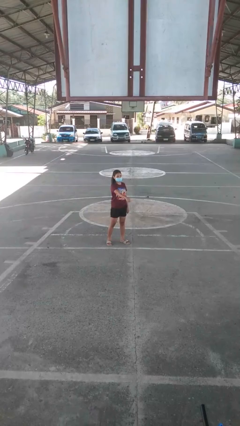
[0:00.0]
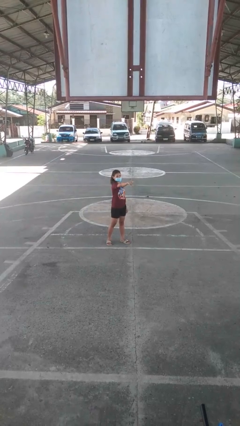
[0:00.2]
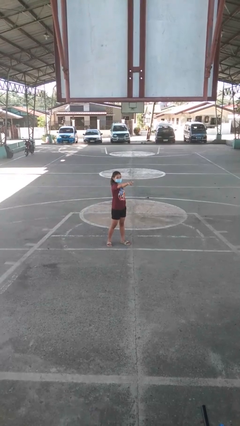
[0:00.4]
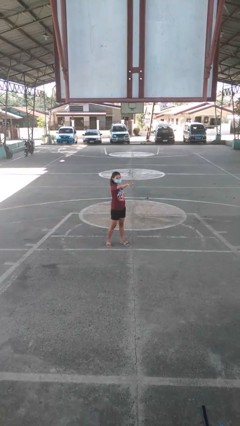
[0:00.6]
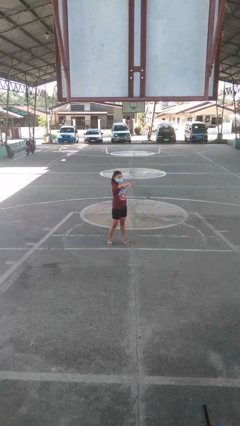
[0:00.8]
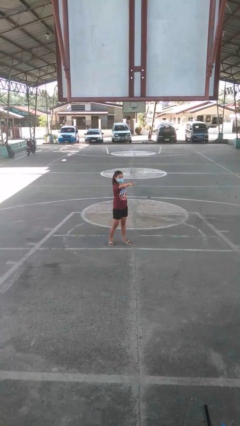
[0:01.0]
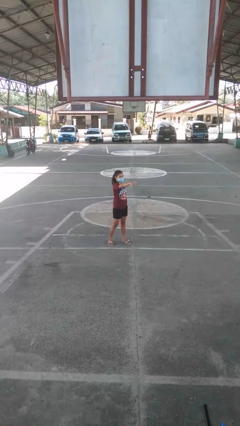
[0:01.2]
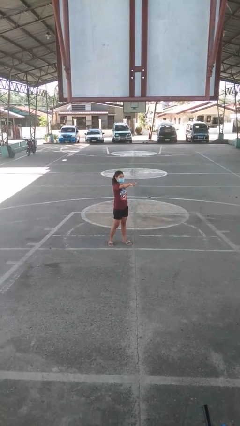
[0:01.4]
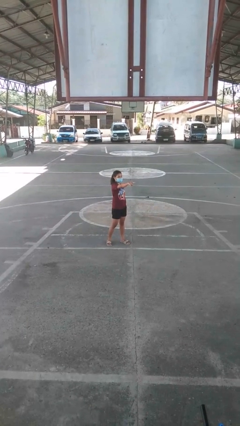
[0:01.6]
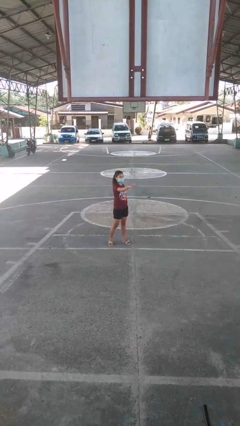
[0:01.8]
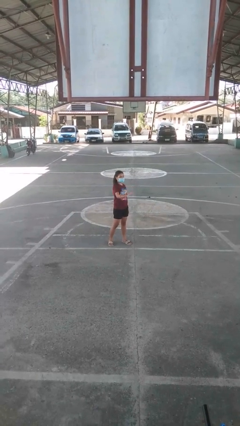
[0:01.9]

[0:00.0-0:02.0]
person points at person

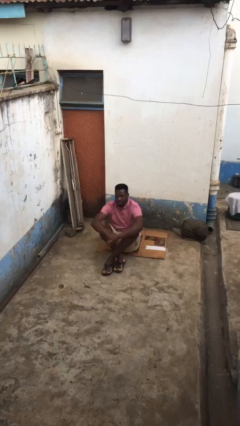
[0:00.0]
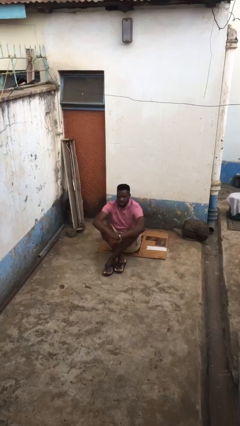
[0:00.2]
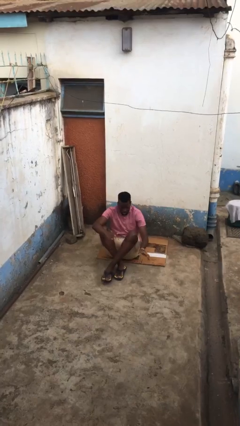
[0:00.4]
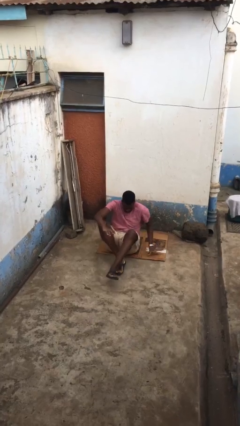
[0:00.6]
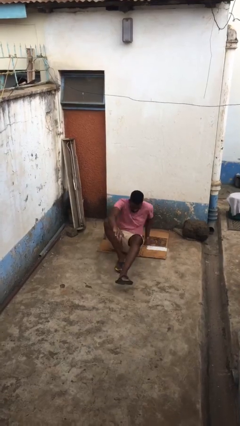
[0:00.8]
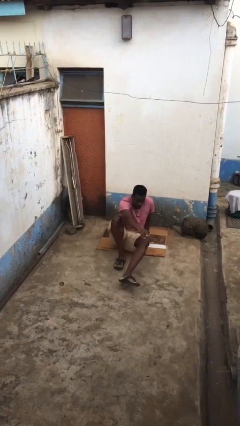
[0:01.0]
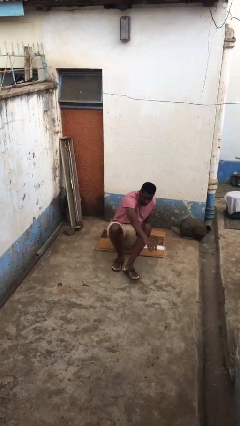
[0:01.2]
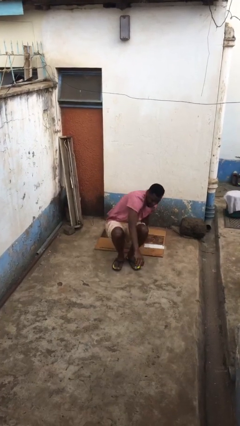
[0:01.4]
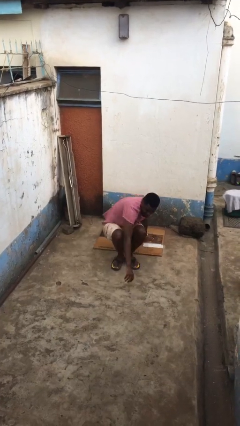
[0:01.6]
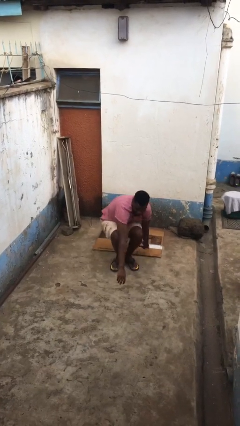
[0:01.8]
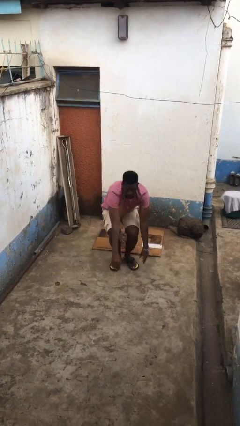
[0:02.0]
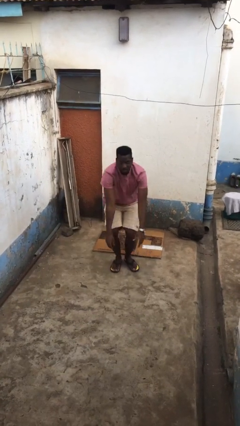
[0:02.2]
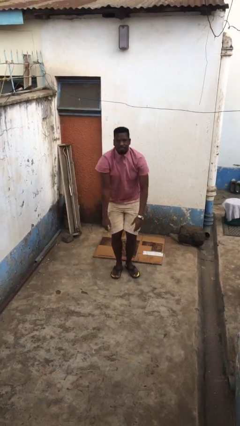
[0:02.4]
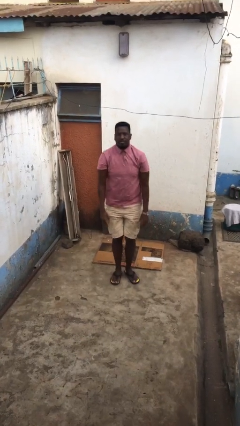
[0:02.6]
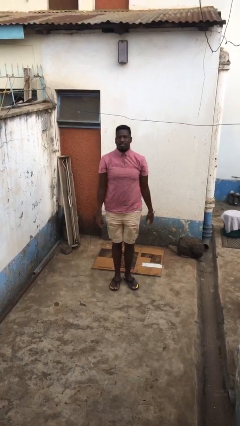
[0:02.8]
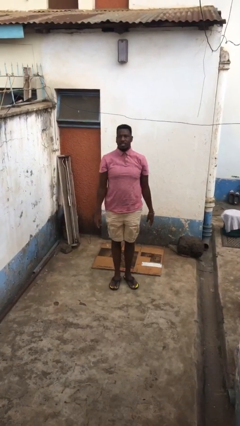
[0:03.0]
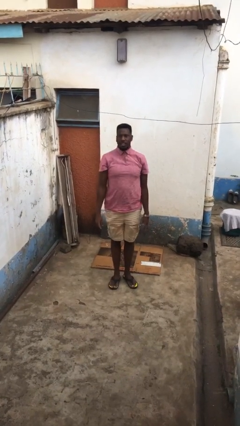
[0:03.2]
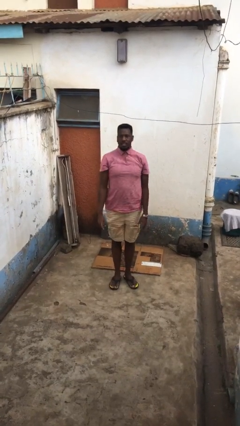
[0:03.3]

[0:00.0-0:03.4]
person stands up from floor

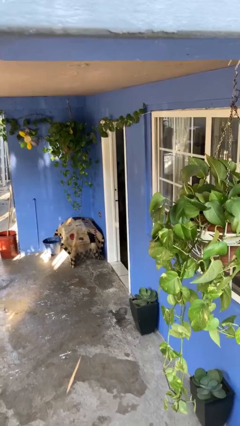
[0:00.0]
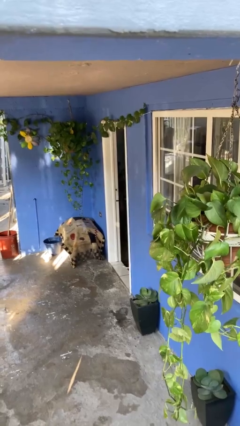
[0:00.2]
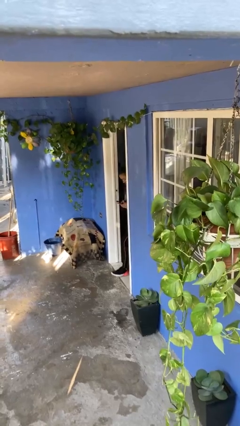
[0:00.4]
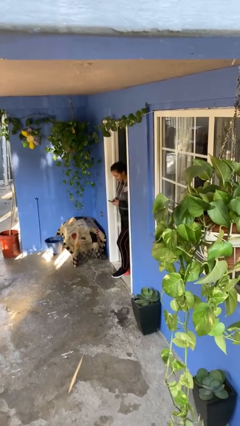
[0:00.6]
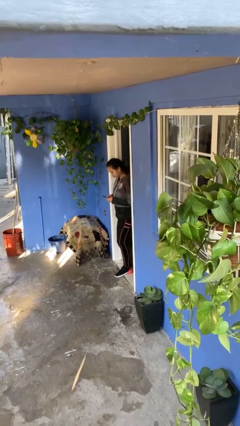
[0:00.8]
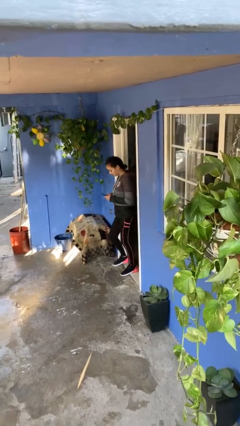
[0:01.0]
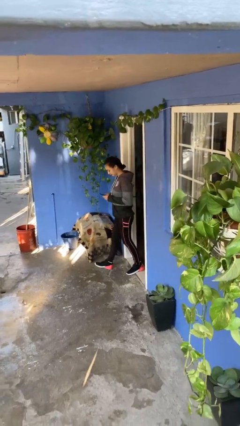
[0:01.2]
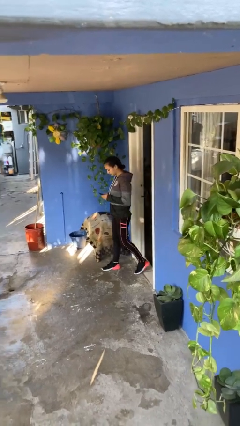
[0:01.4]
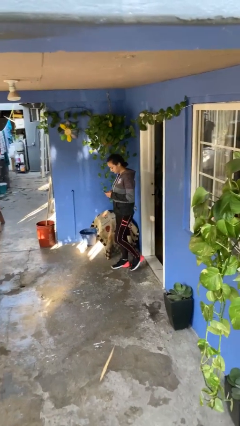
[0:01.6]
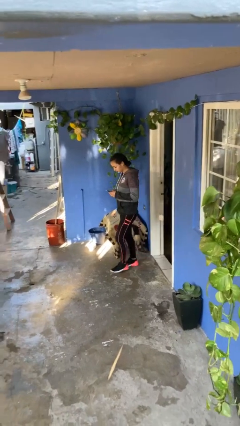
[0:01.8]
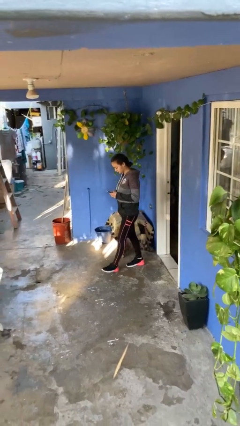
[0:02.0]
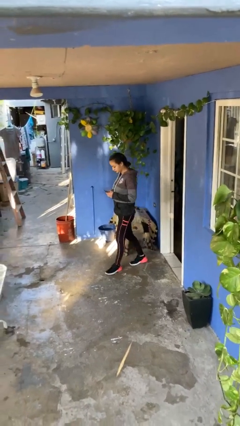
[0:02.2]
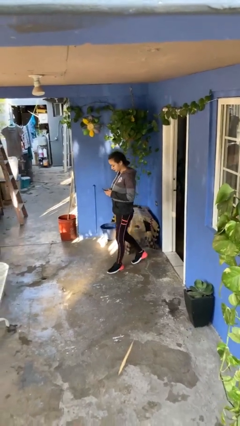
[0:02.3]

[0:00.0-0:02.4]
person enters scene through structure

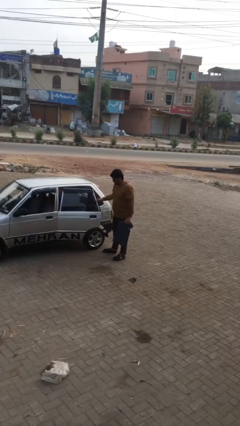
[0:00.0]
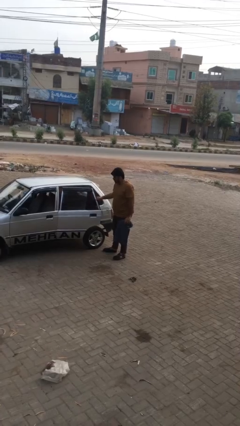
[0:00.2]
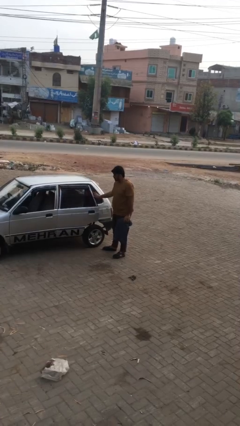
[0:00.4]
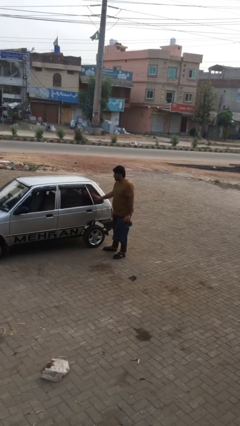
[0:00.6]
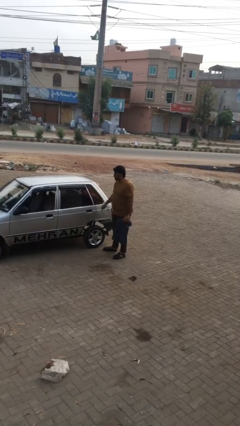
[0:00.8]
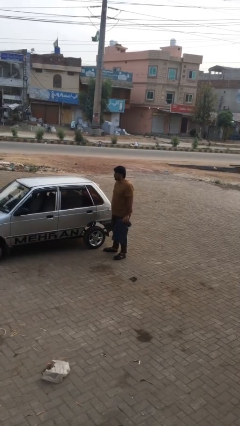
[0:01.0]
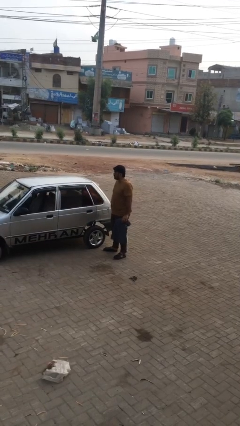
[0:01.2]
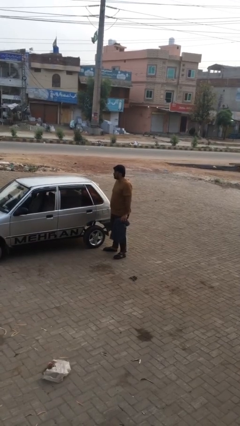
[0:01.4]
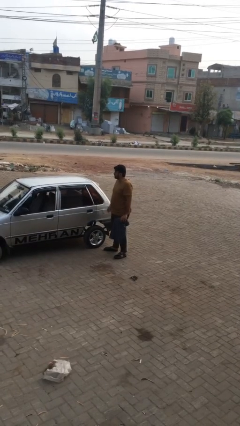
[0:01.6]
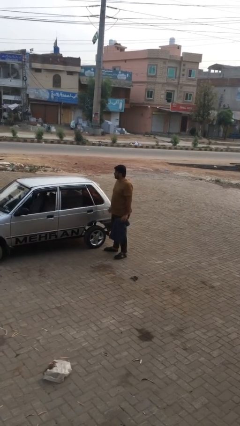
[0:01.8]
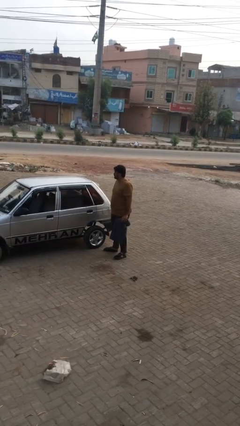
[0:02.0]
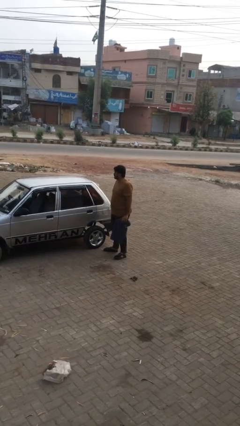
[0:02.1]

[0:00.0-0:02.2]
person closes car door

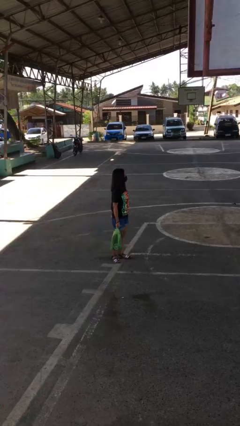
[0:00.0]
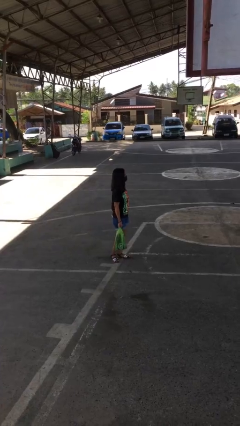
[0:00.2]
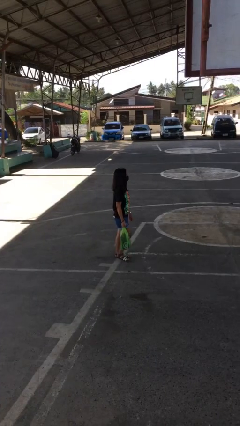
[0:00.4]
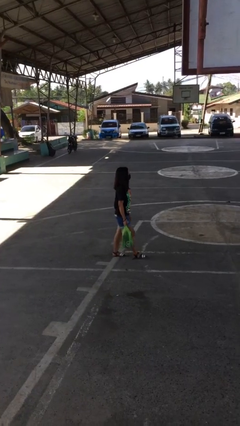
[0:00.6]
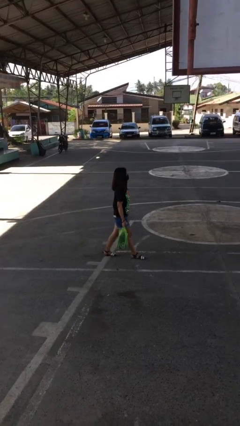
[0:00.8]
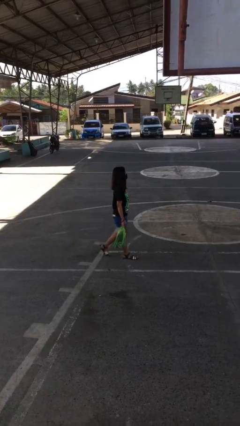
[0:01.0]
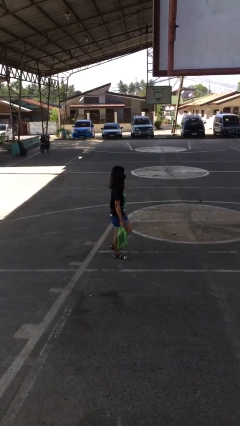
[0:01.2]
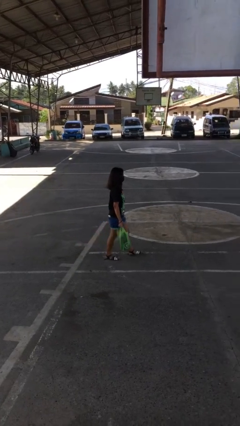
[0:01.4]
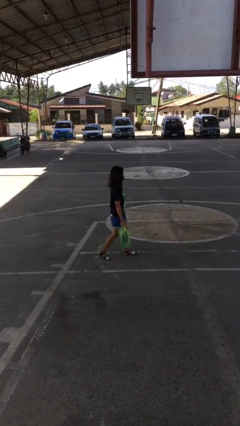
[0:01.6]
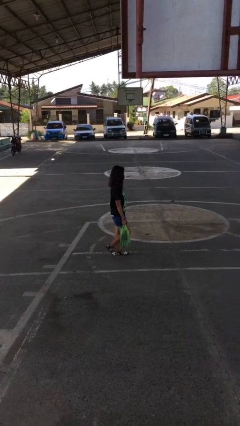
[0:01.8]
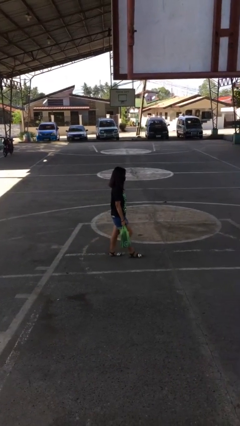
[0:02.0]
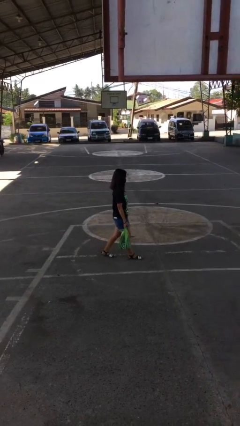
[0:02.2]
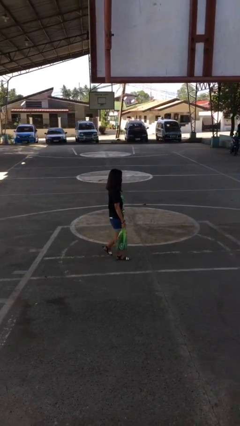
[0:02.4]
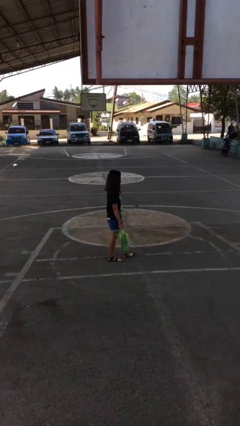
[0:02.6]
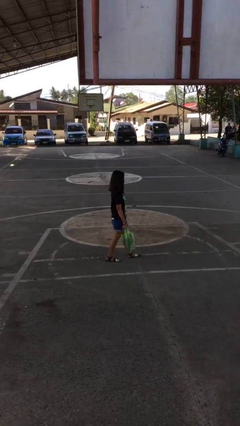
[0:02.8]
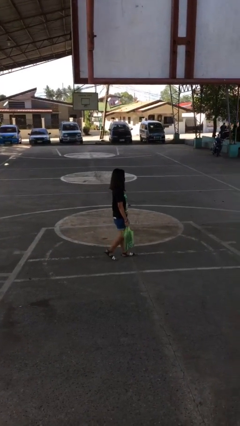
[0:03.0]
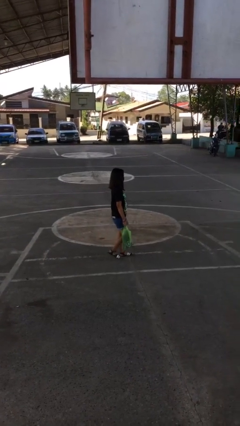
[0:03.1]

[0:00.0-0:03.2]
person carries groceries

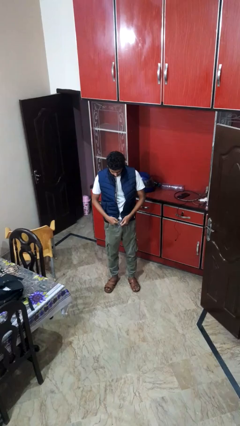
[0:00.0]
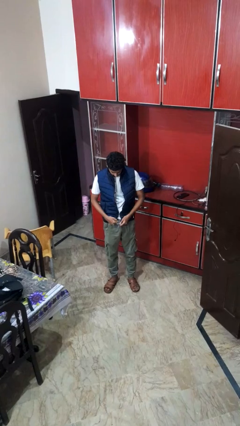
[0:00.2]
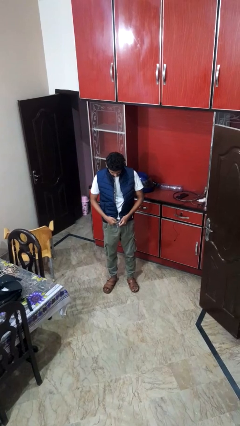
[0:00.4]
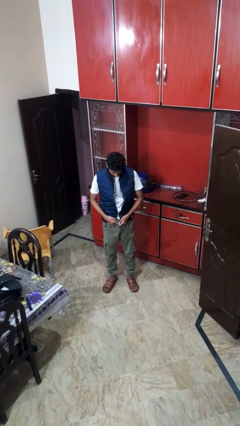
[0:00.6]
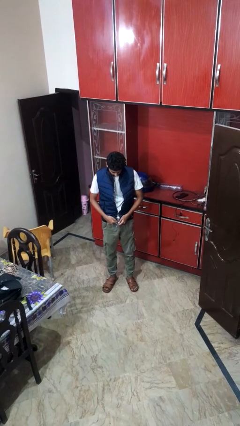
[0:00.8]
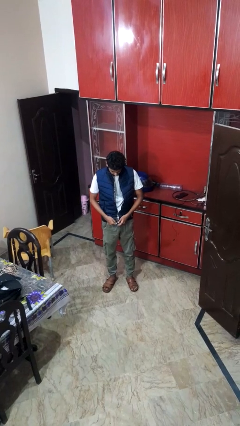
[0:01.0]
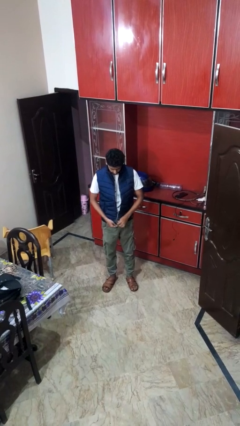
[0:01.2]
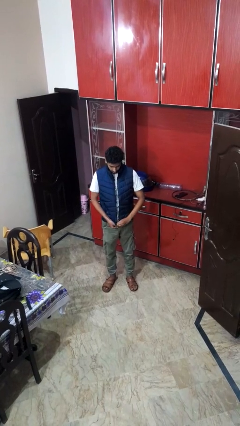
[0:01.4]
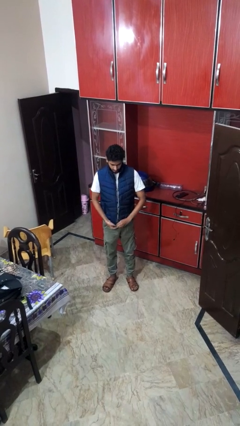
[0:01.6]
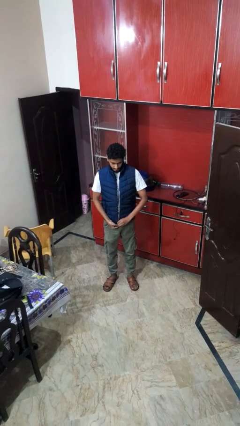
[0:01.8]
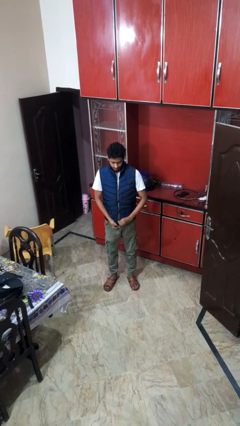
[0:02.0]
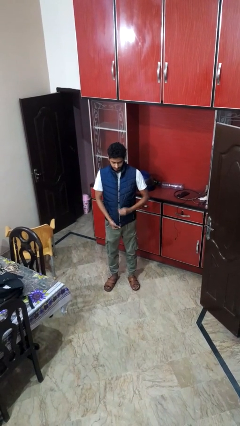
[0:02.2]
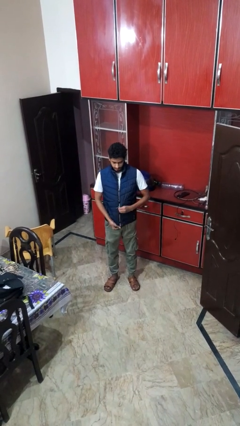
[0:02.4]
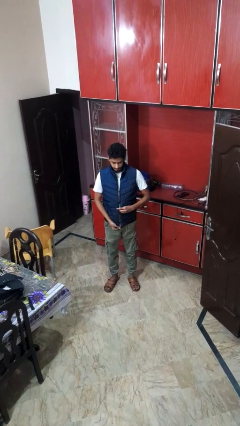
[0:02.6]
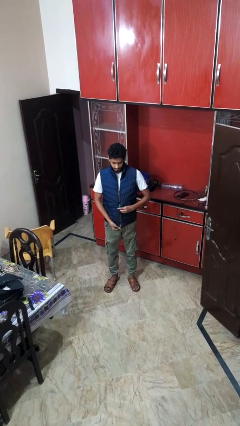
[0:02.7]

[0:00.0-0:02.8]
person zips up jacket

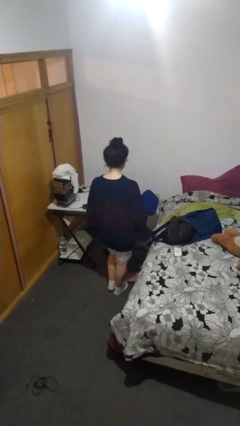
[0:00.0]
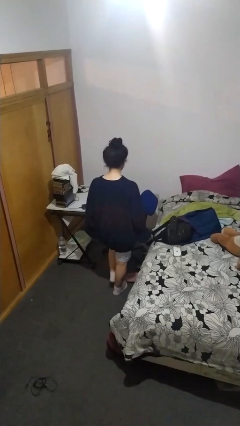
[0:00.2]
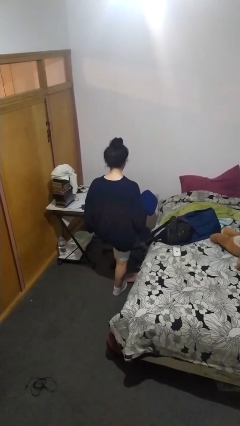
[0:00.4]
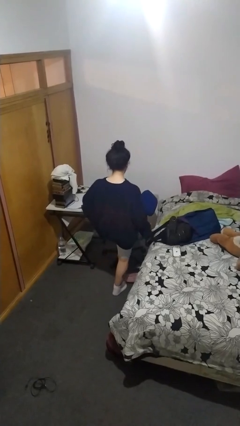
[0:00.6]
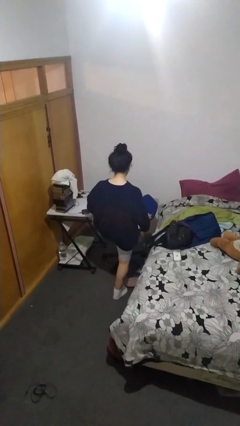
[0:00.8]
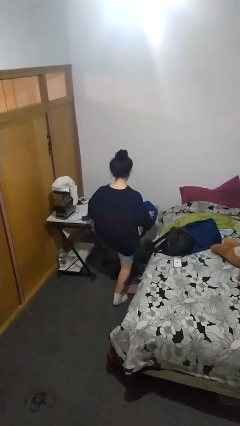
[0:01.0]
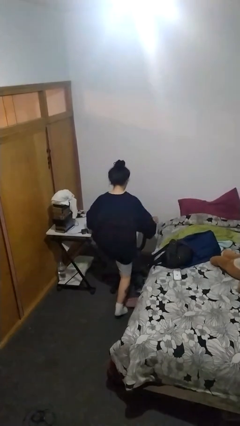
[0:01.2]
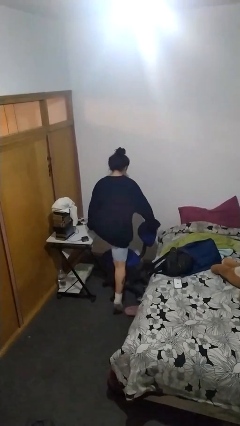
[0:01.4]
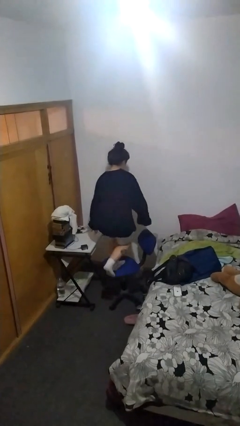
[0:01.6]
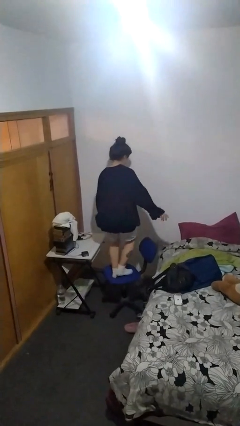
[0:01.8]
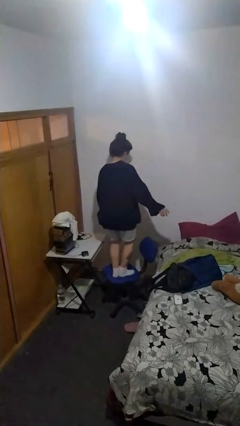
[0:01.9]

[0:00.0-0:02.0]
person climbs on chair
